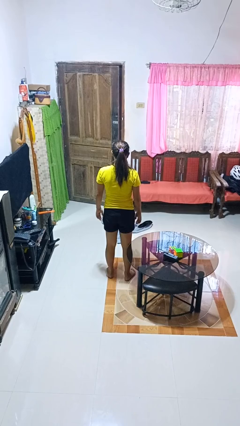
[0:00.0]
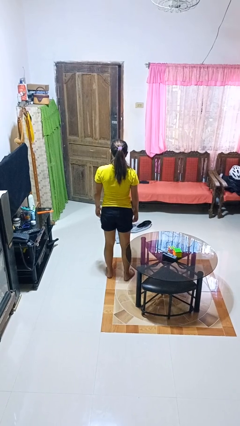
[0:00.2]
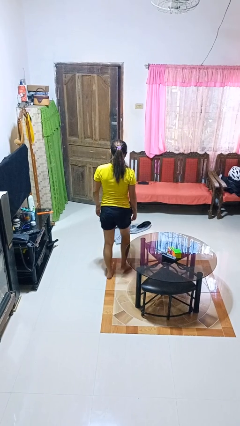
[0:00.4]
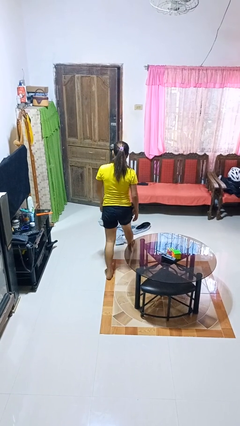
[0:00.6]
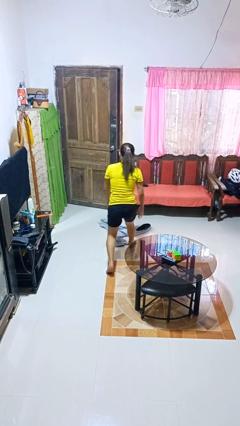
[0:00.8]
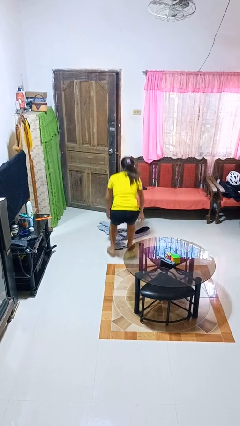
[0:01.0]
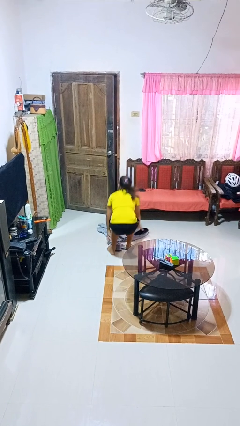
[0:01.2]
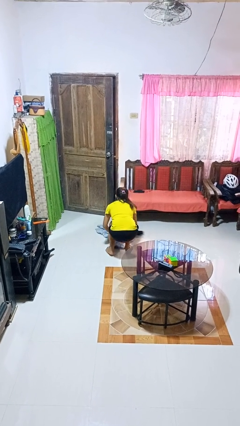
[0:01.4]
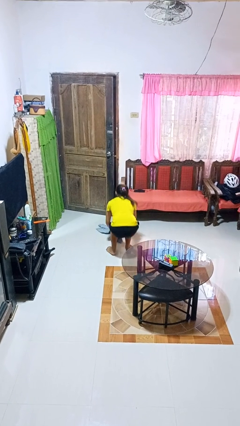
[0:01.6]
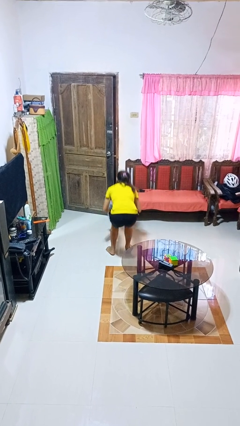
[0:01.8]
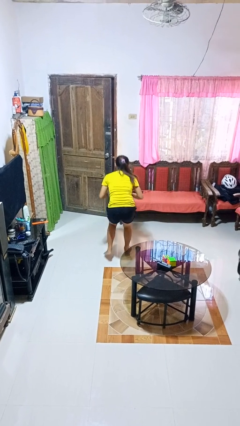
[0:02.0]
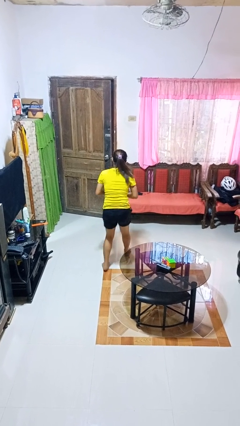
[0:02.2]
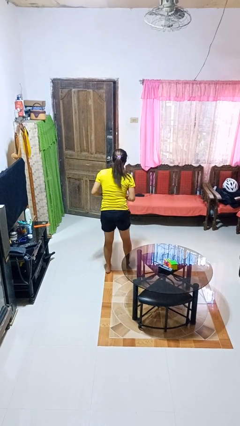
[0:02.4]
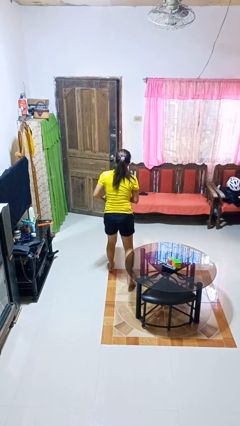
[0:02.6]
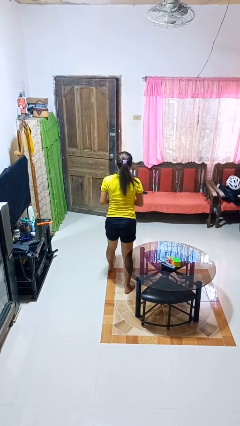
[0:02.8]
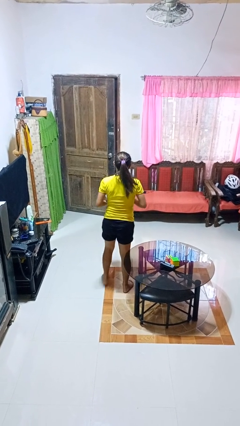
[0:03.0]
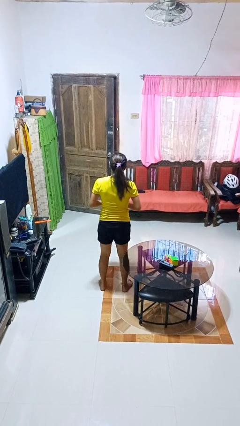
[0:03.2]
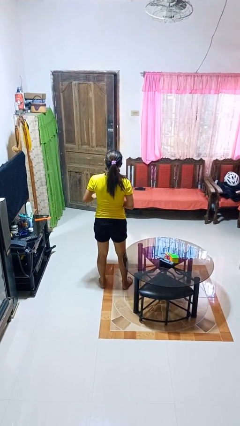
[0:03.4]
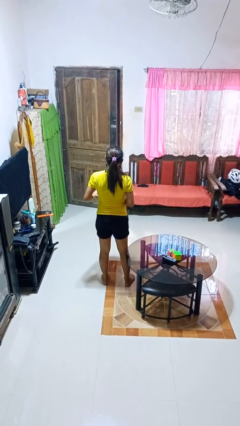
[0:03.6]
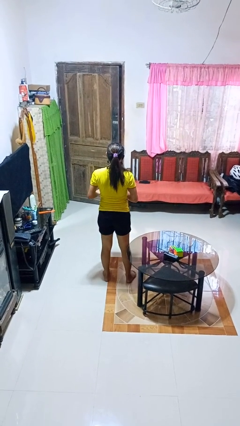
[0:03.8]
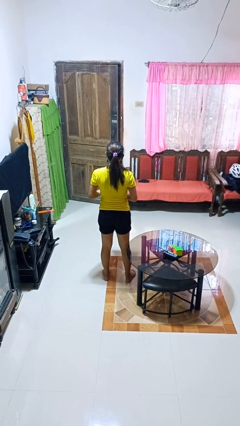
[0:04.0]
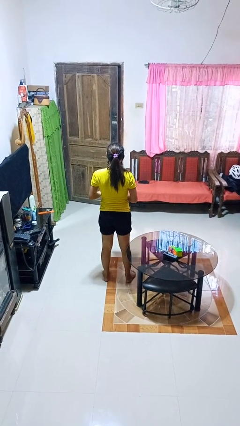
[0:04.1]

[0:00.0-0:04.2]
person picks up object from floor

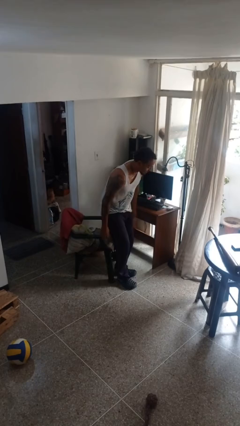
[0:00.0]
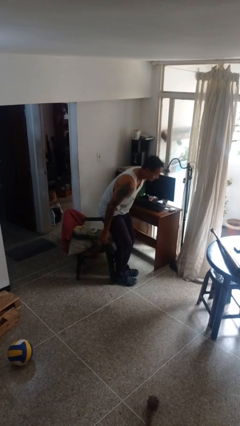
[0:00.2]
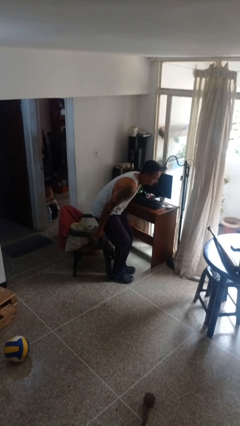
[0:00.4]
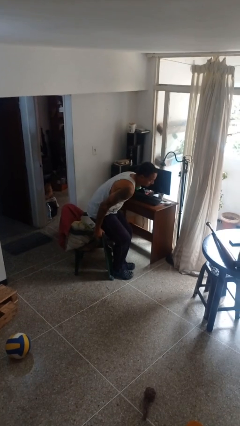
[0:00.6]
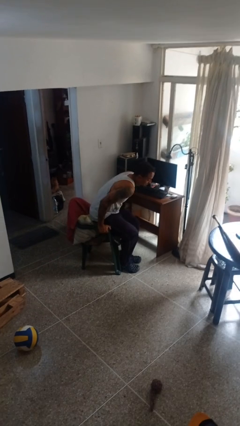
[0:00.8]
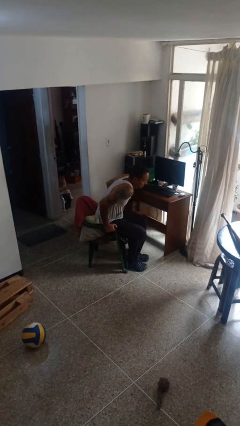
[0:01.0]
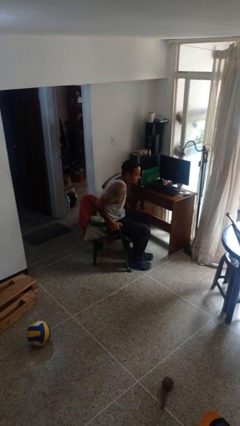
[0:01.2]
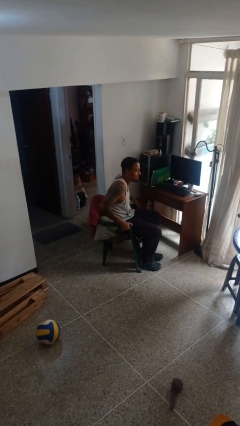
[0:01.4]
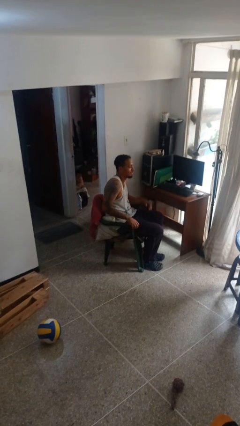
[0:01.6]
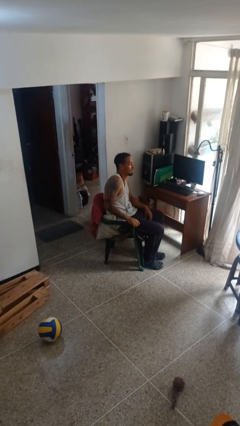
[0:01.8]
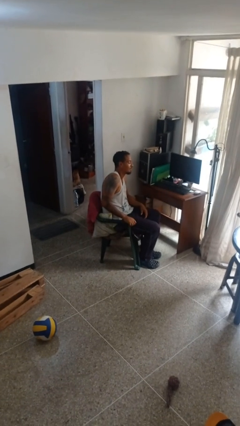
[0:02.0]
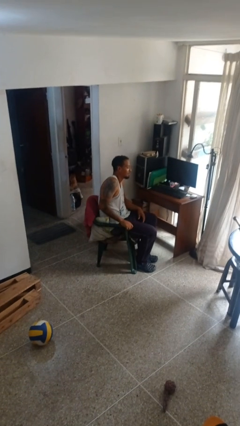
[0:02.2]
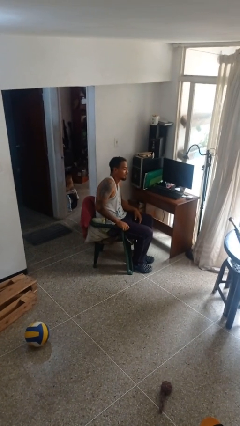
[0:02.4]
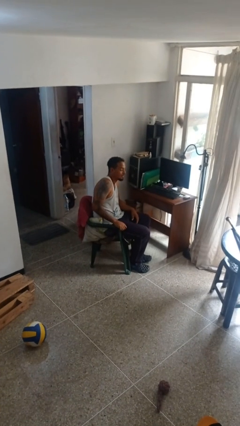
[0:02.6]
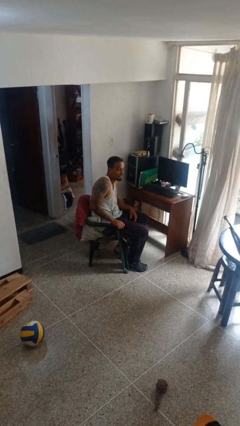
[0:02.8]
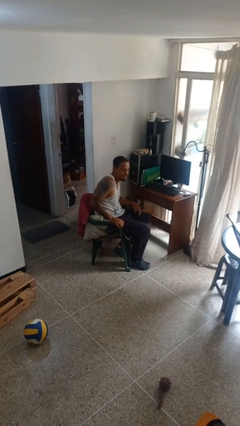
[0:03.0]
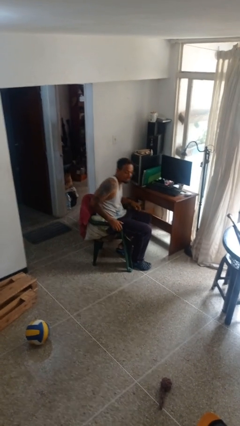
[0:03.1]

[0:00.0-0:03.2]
person sits down

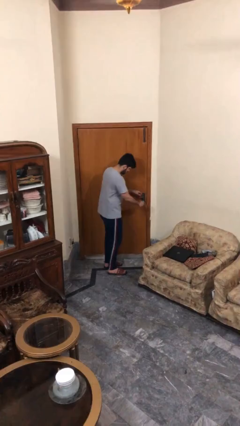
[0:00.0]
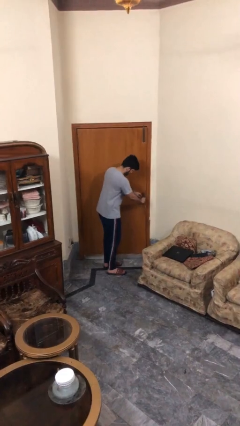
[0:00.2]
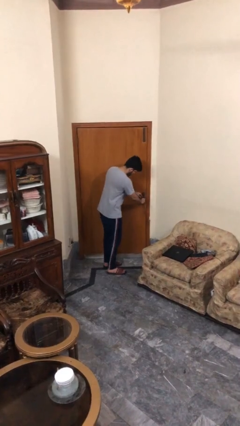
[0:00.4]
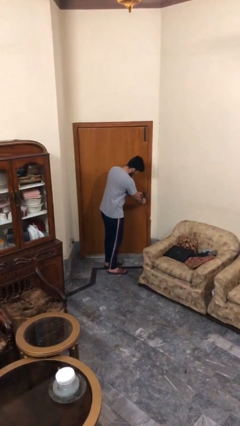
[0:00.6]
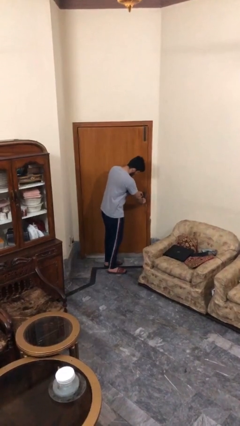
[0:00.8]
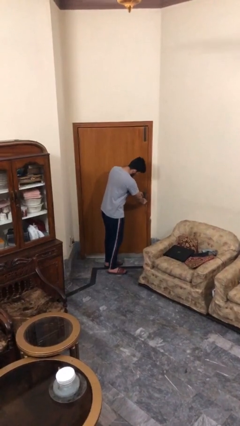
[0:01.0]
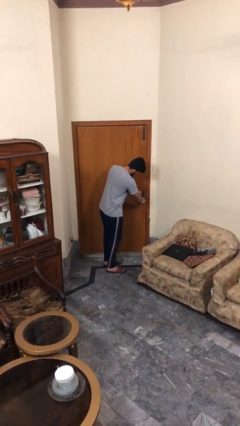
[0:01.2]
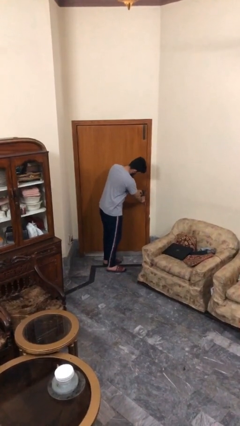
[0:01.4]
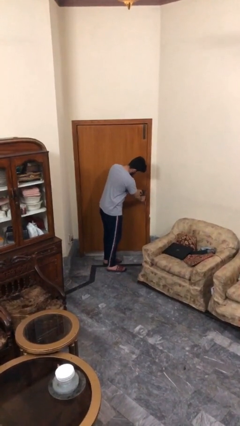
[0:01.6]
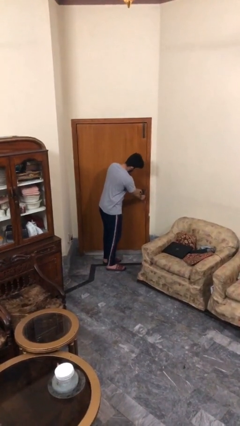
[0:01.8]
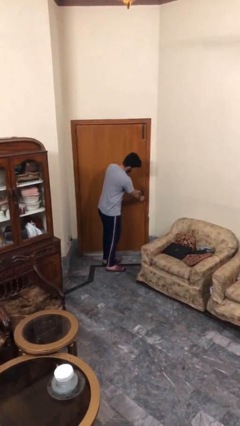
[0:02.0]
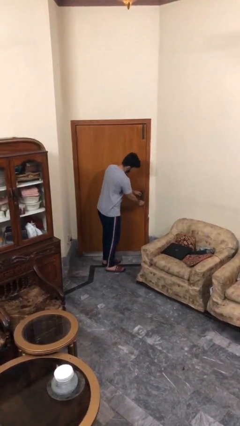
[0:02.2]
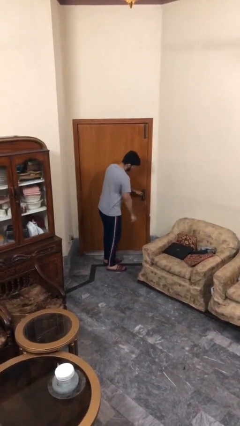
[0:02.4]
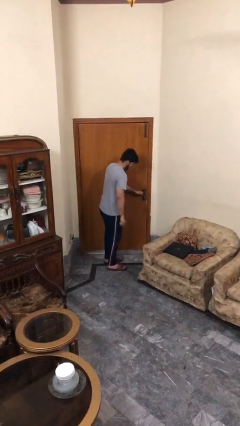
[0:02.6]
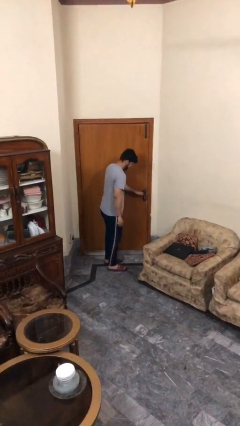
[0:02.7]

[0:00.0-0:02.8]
person unlocks door with keys

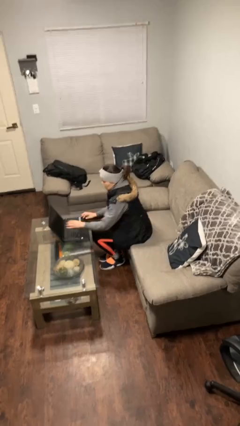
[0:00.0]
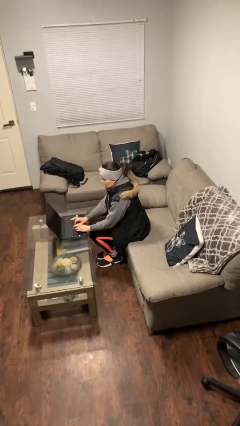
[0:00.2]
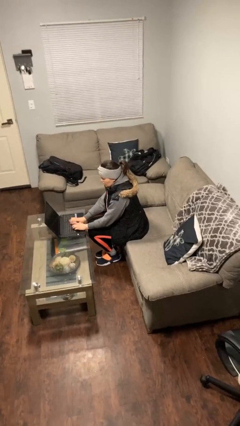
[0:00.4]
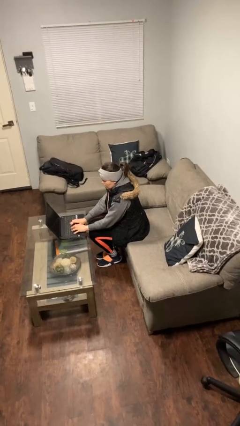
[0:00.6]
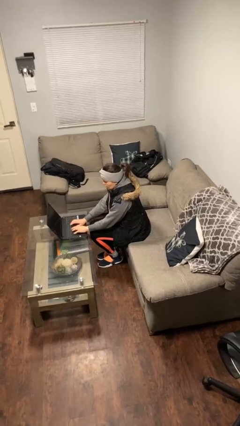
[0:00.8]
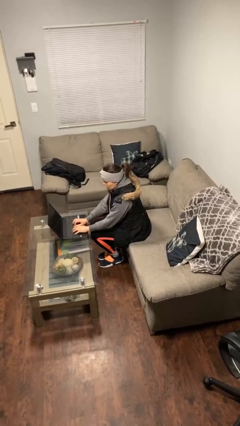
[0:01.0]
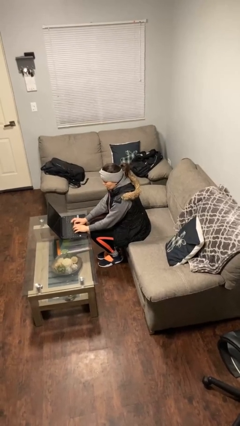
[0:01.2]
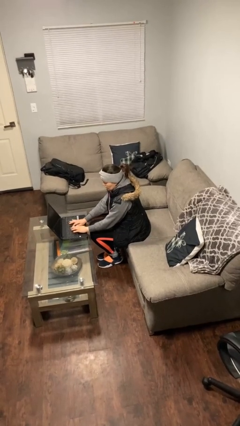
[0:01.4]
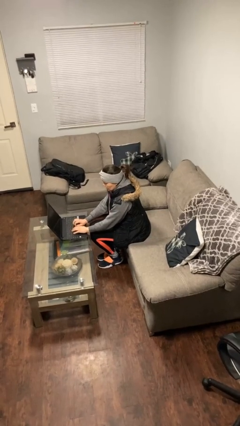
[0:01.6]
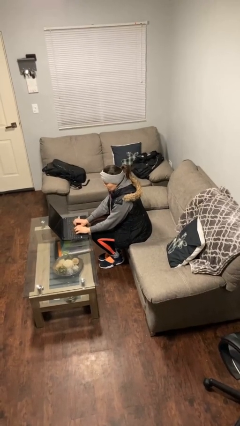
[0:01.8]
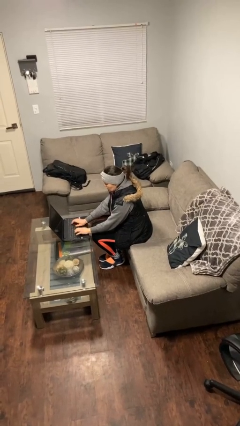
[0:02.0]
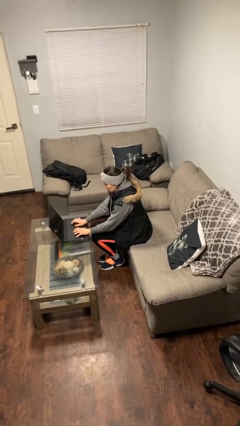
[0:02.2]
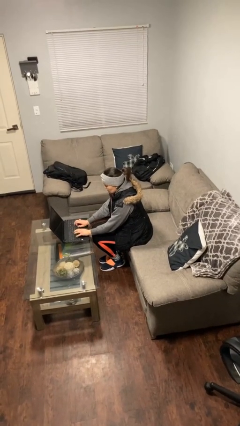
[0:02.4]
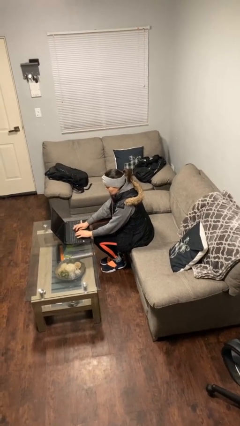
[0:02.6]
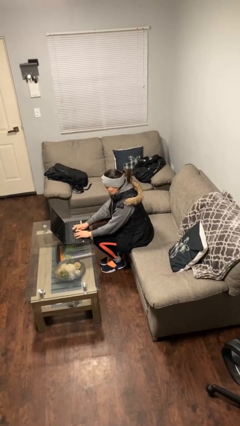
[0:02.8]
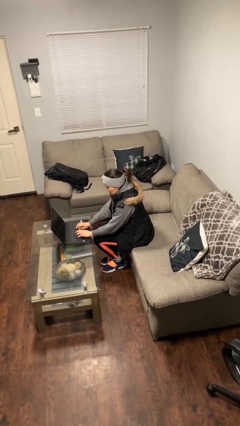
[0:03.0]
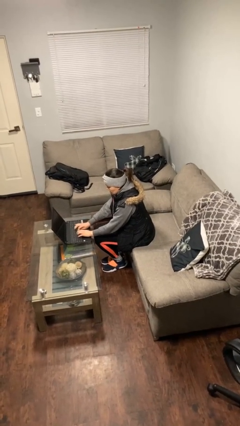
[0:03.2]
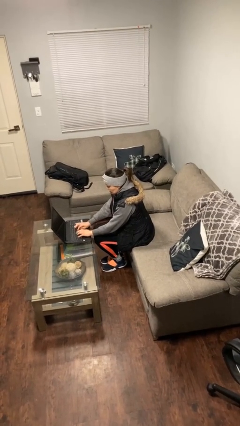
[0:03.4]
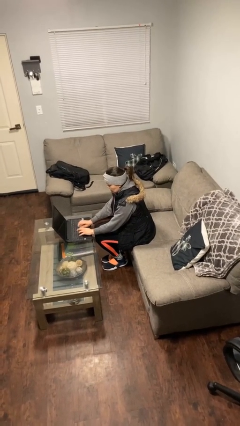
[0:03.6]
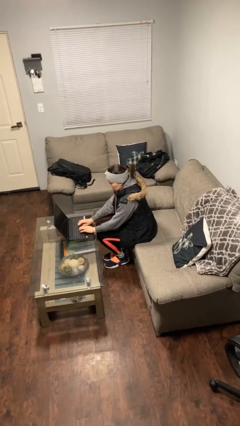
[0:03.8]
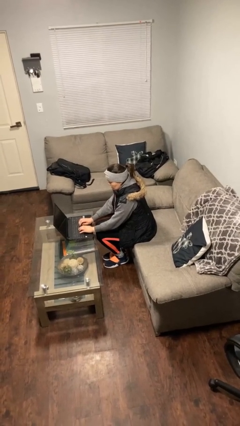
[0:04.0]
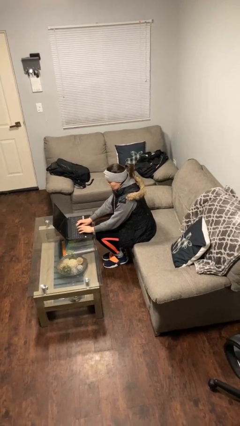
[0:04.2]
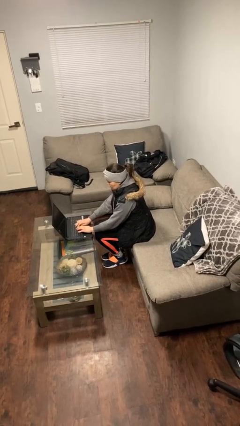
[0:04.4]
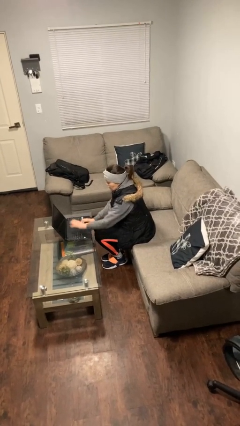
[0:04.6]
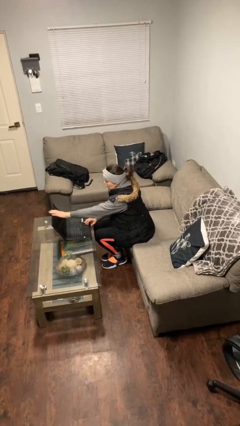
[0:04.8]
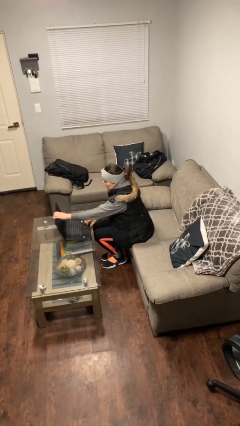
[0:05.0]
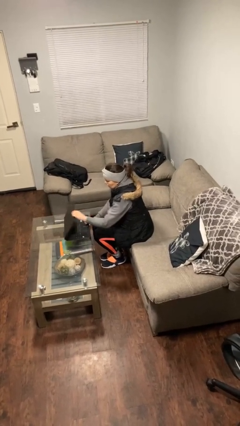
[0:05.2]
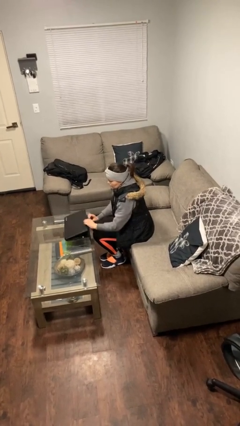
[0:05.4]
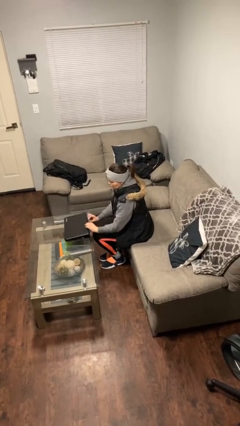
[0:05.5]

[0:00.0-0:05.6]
person interacts with laptop

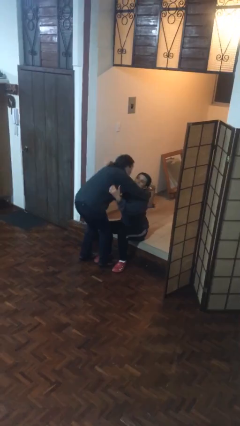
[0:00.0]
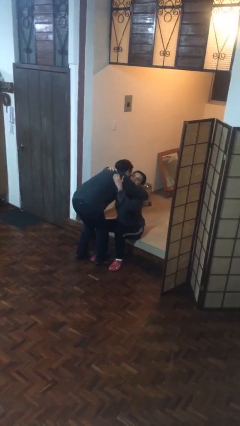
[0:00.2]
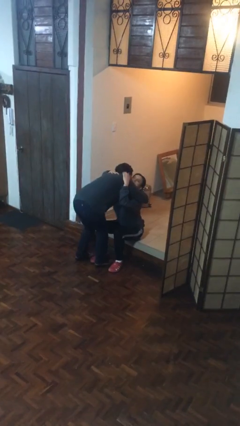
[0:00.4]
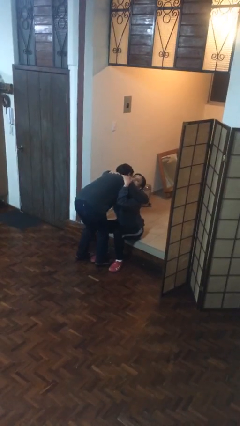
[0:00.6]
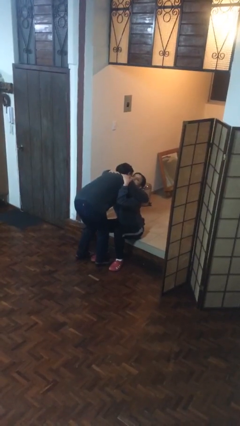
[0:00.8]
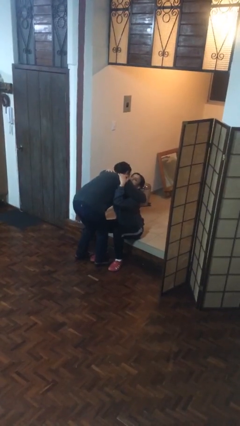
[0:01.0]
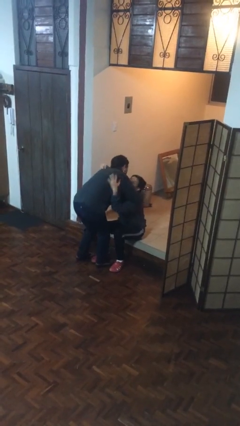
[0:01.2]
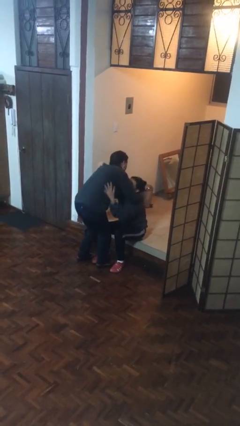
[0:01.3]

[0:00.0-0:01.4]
person embraces person

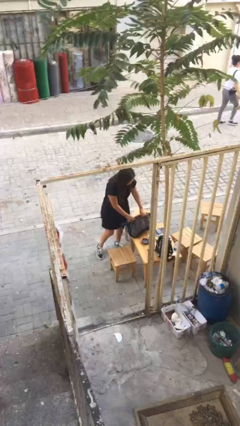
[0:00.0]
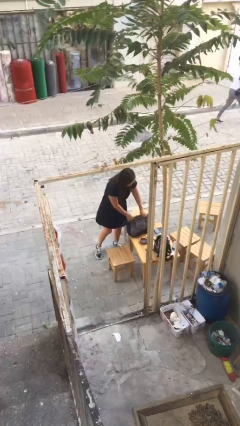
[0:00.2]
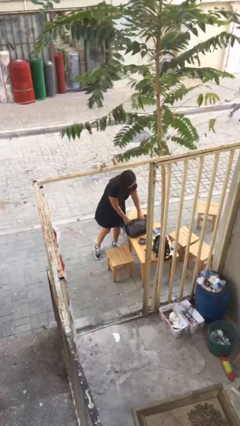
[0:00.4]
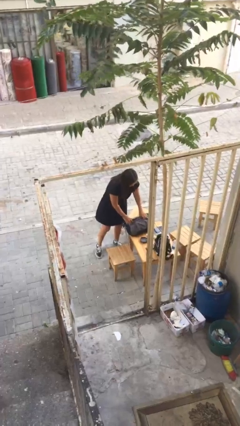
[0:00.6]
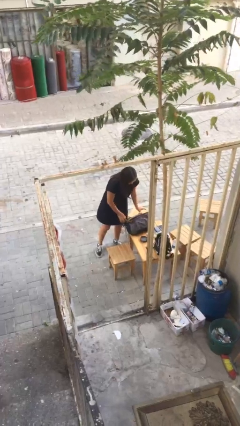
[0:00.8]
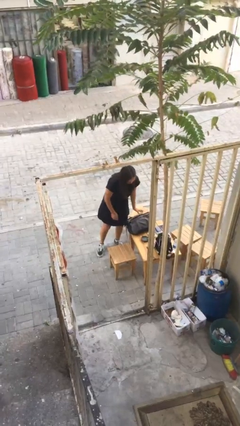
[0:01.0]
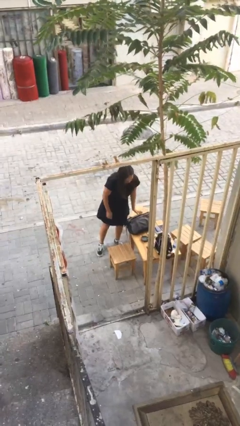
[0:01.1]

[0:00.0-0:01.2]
person puts down object on table
